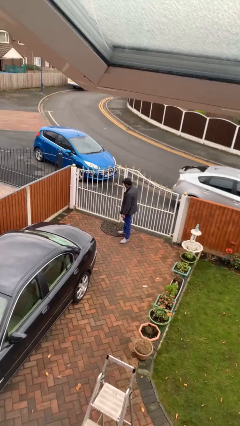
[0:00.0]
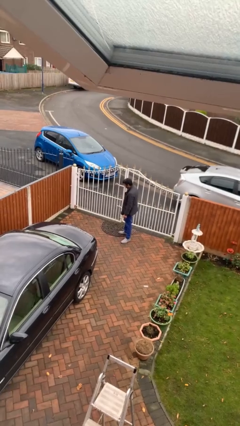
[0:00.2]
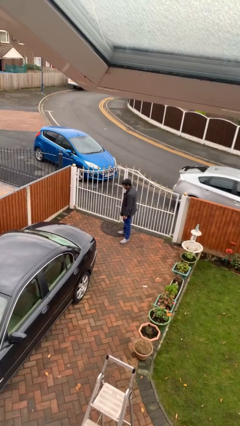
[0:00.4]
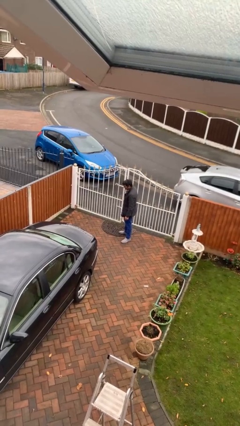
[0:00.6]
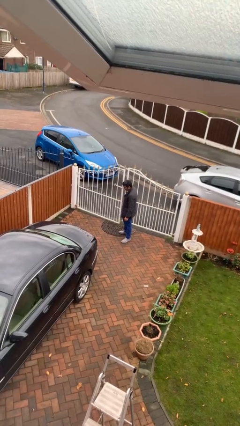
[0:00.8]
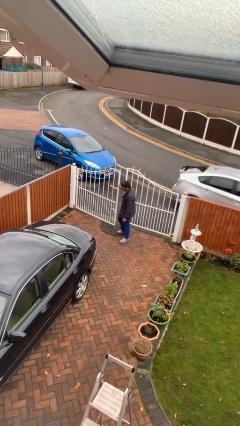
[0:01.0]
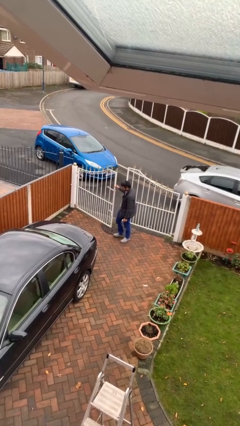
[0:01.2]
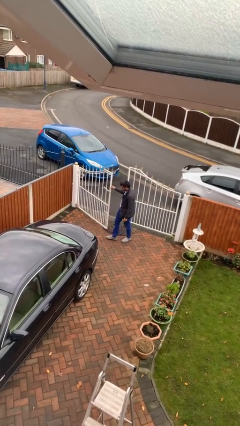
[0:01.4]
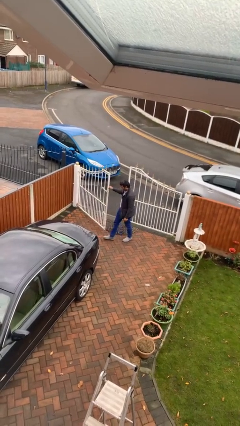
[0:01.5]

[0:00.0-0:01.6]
person opens facility door

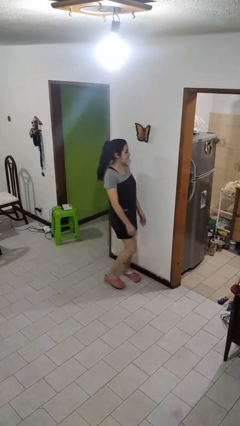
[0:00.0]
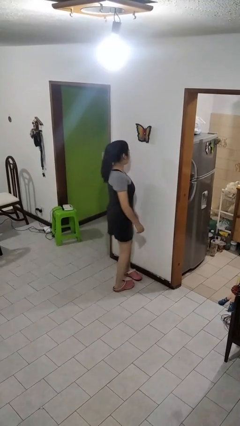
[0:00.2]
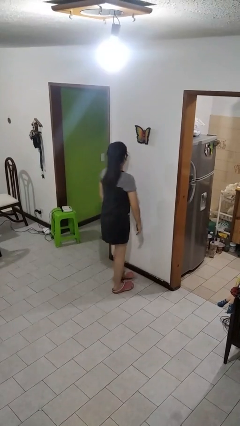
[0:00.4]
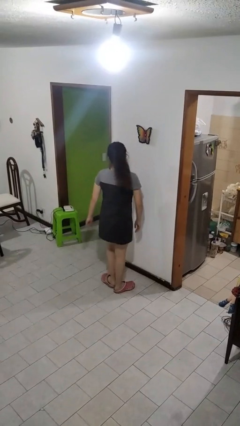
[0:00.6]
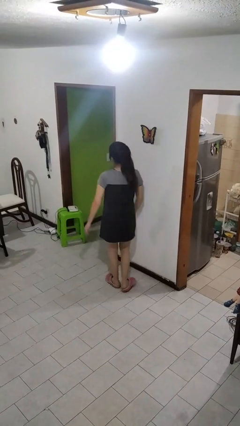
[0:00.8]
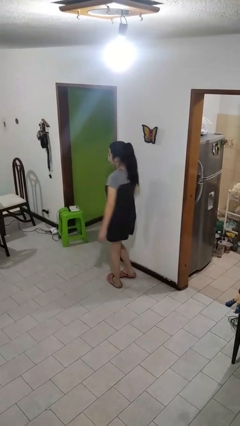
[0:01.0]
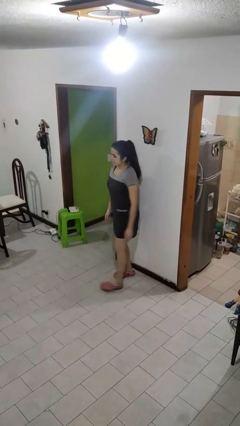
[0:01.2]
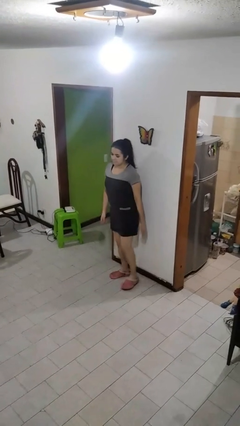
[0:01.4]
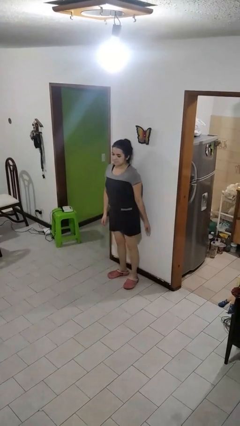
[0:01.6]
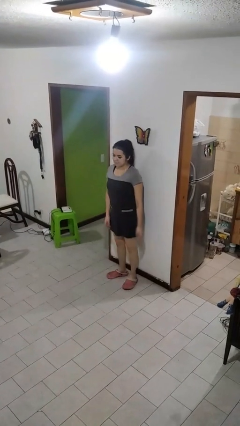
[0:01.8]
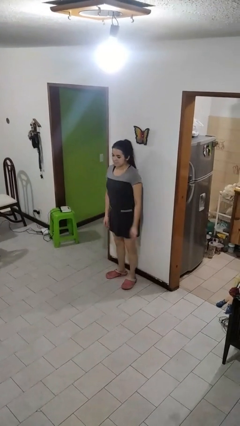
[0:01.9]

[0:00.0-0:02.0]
person twirls

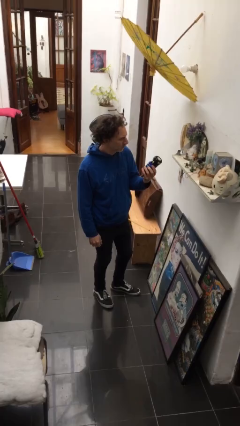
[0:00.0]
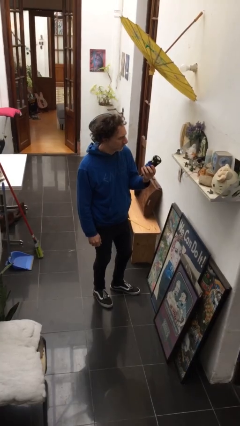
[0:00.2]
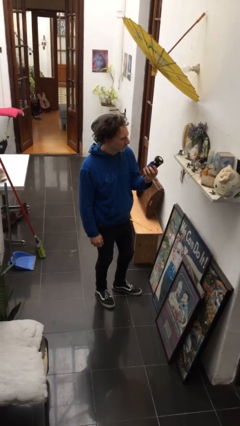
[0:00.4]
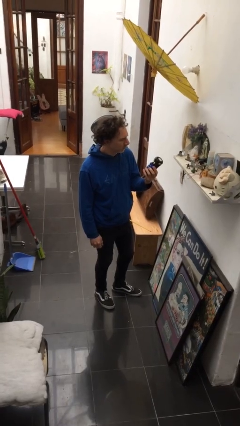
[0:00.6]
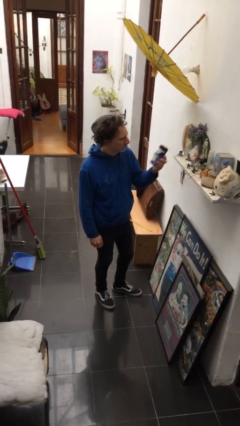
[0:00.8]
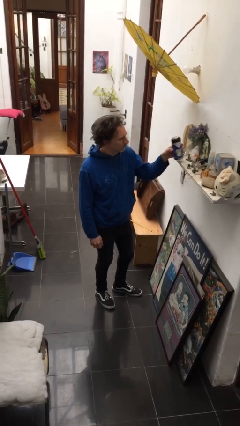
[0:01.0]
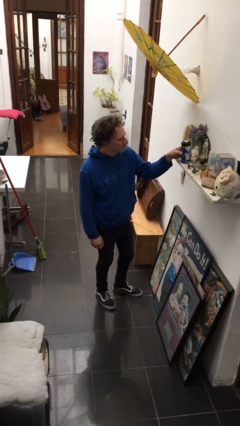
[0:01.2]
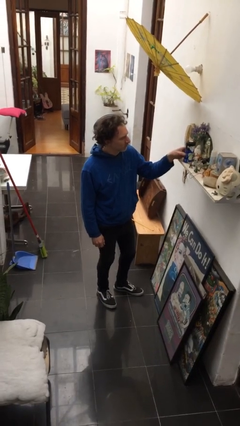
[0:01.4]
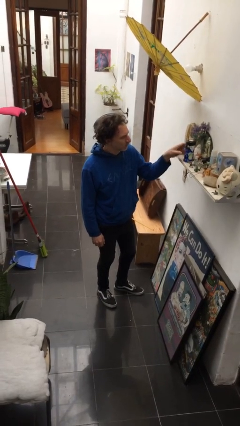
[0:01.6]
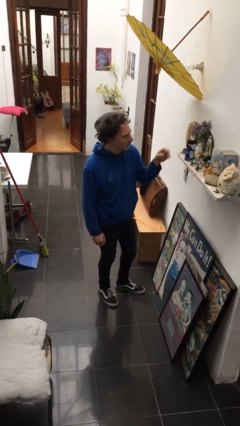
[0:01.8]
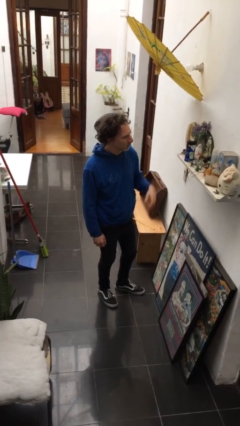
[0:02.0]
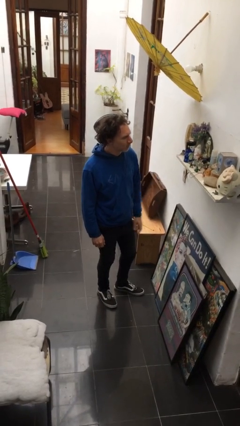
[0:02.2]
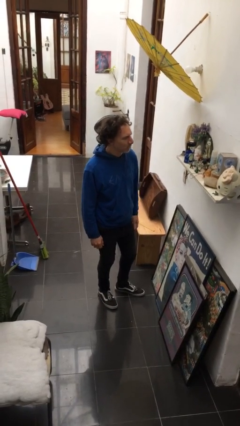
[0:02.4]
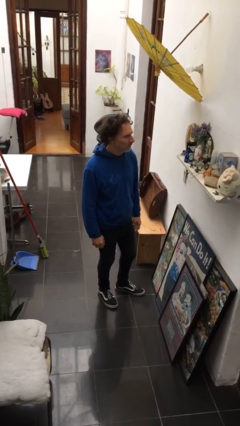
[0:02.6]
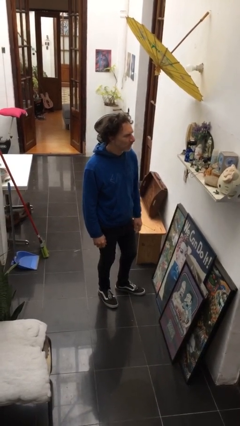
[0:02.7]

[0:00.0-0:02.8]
person puts down object on shelf

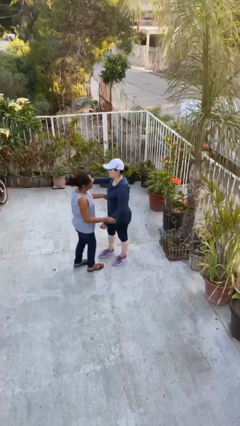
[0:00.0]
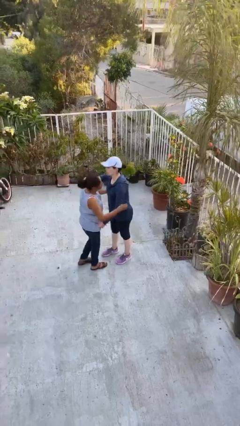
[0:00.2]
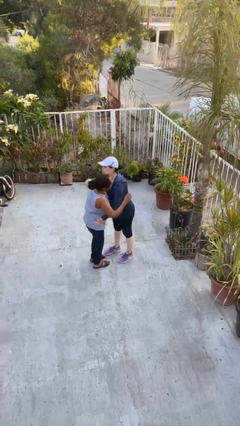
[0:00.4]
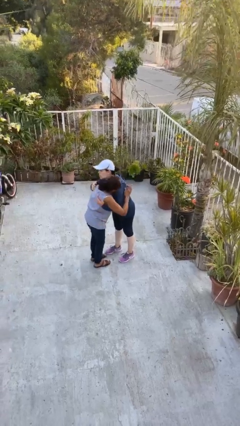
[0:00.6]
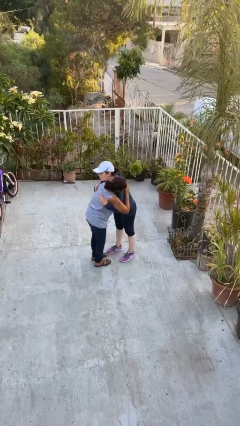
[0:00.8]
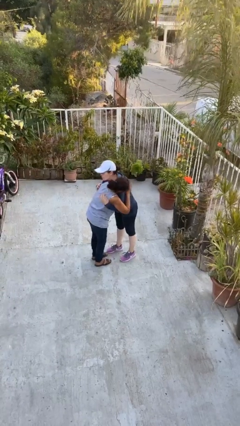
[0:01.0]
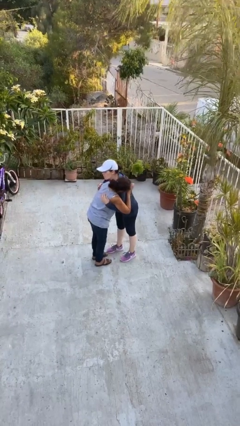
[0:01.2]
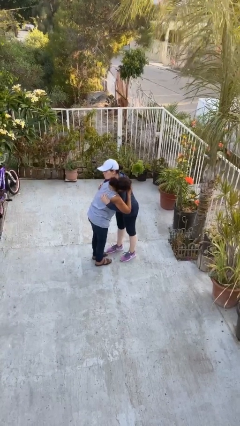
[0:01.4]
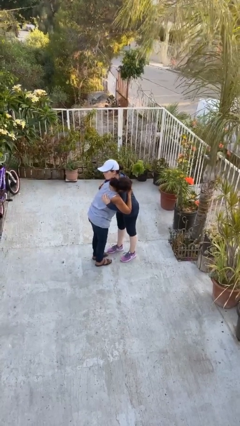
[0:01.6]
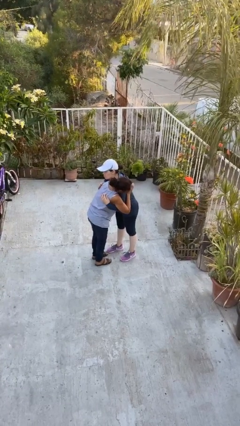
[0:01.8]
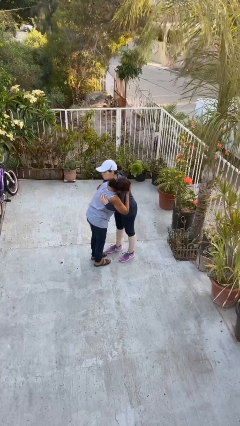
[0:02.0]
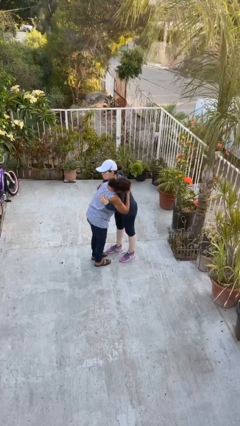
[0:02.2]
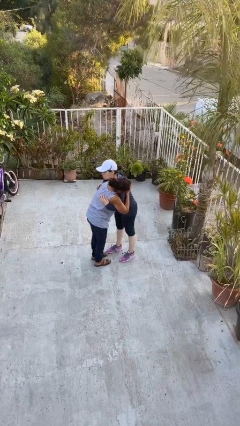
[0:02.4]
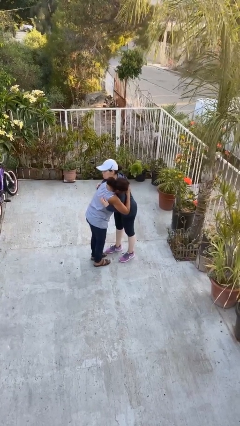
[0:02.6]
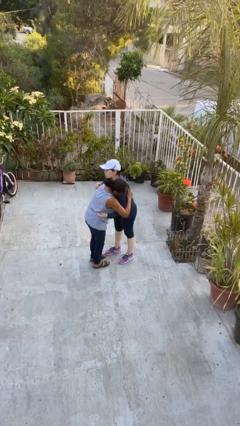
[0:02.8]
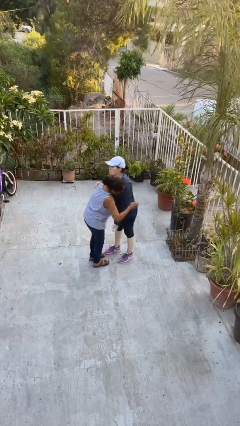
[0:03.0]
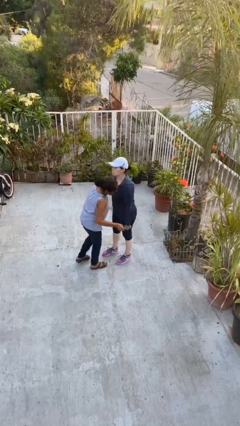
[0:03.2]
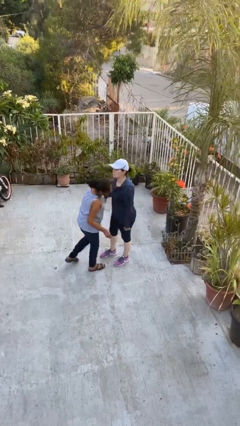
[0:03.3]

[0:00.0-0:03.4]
person embraces person

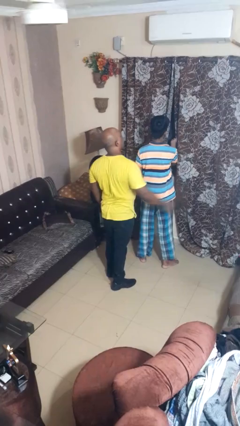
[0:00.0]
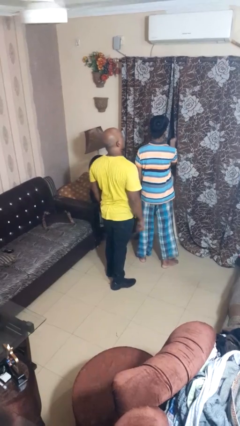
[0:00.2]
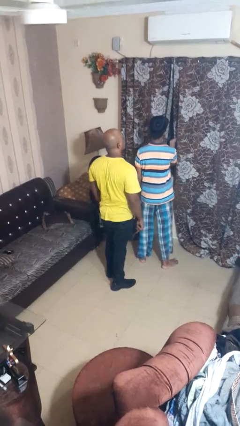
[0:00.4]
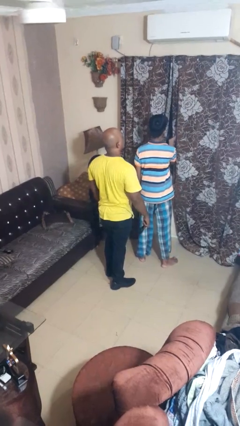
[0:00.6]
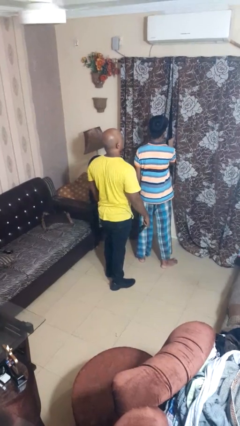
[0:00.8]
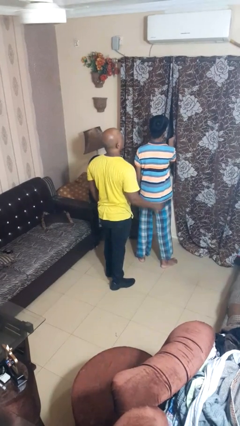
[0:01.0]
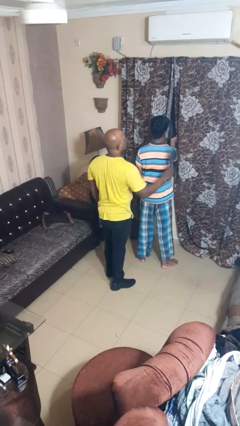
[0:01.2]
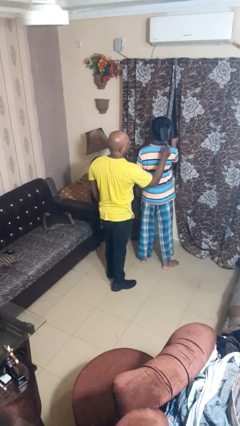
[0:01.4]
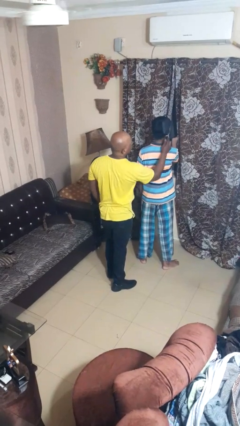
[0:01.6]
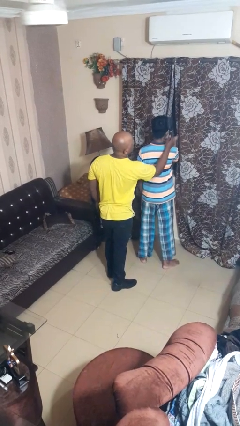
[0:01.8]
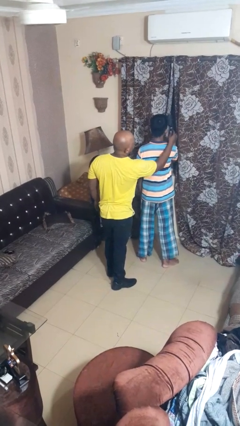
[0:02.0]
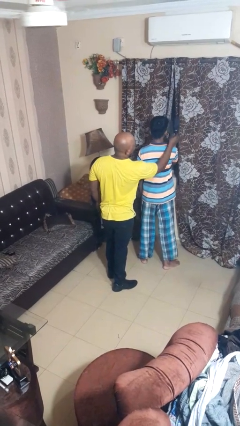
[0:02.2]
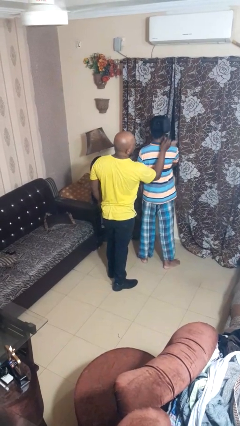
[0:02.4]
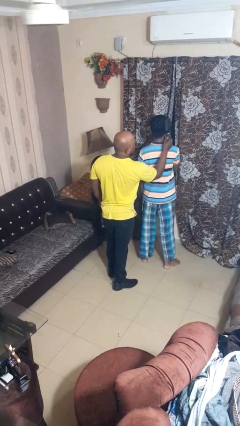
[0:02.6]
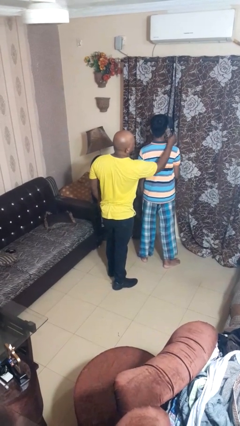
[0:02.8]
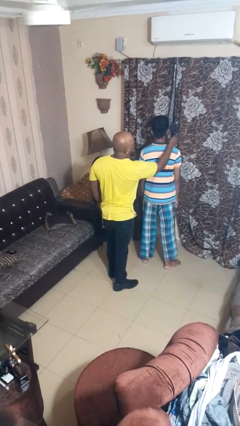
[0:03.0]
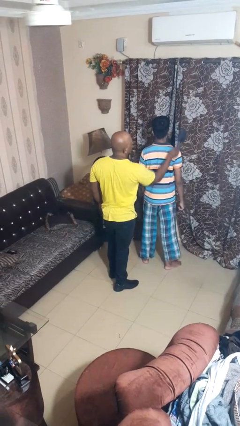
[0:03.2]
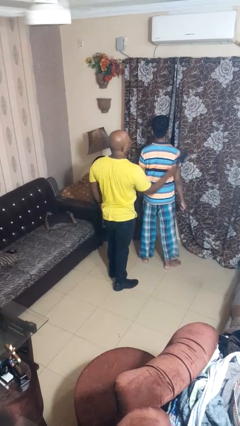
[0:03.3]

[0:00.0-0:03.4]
person brushes hair of person

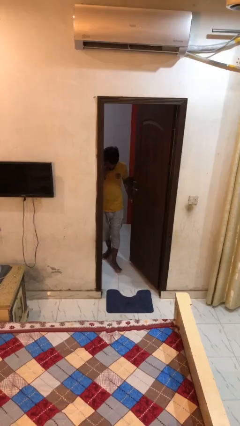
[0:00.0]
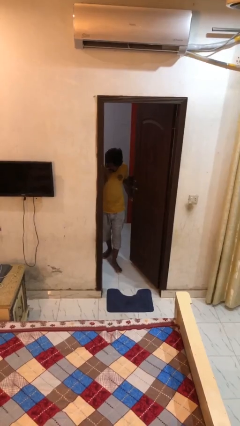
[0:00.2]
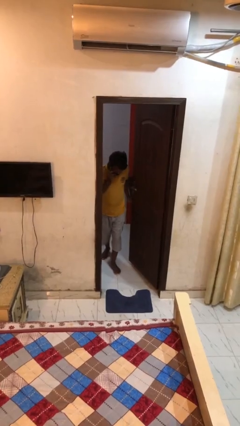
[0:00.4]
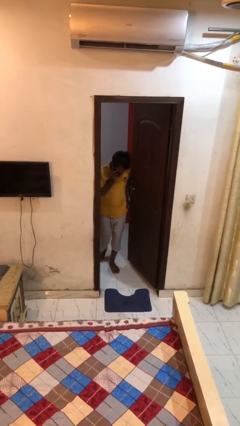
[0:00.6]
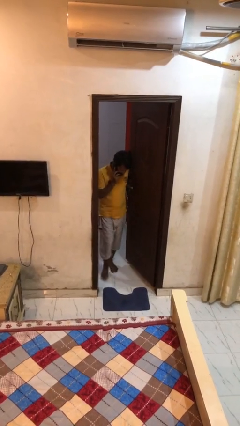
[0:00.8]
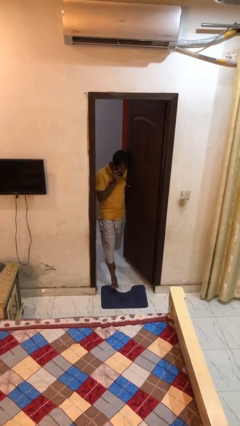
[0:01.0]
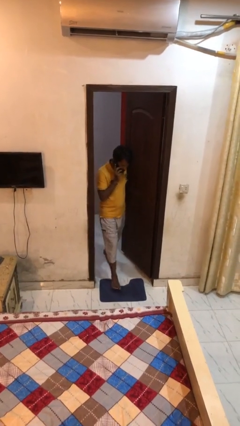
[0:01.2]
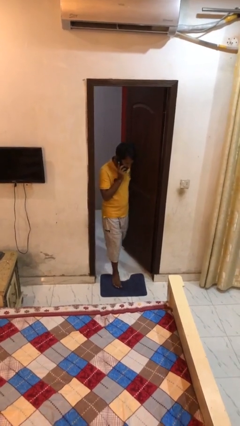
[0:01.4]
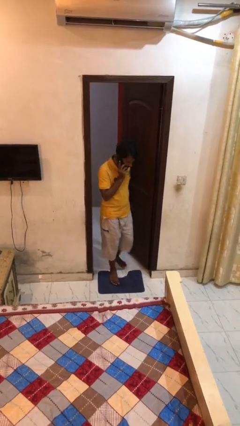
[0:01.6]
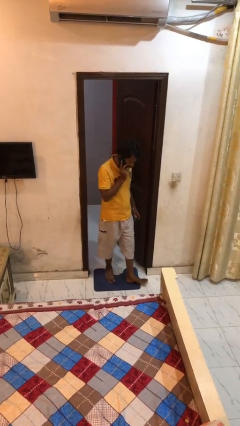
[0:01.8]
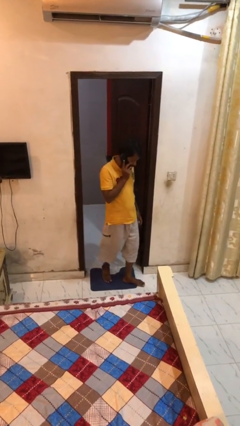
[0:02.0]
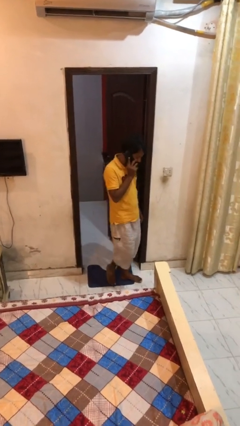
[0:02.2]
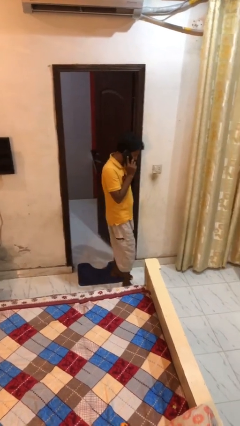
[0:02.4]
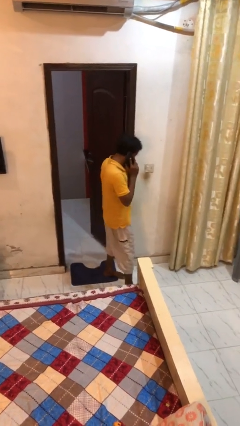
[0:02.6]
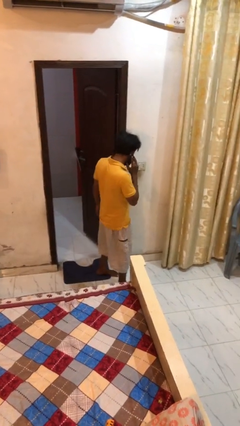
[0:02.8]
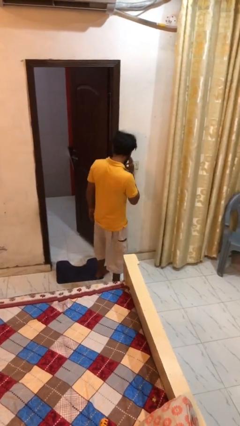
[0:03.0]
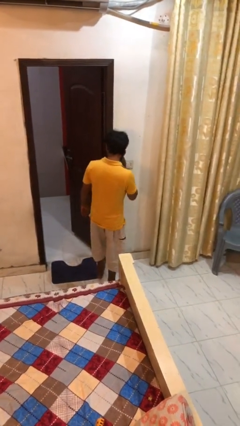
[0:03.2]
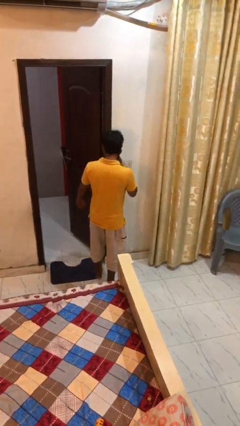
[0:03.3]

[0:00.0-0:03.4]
person enters scene through structure

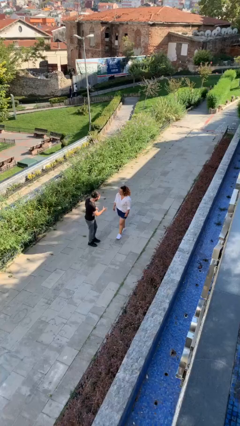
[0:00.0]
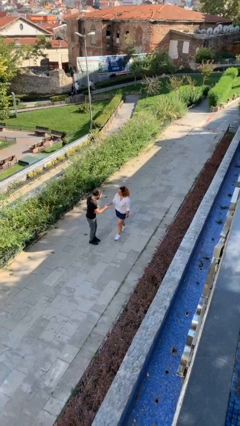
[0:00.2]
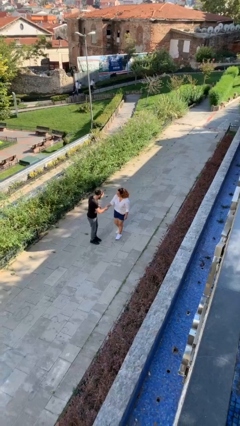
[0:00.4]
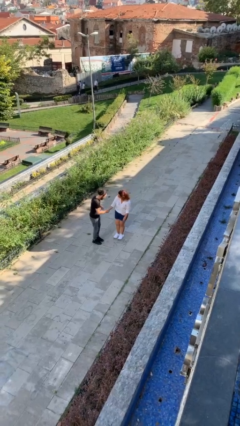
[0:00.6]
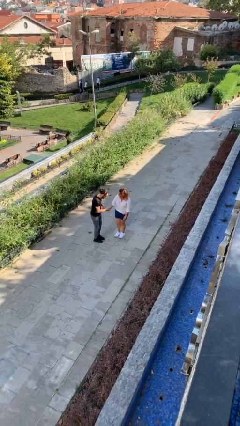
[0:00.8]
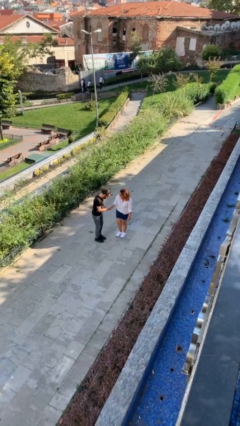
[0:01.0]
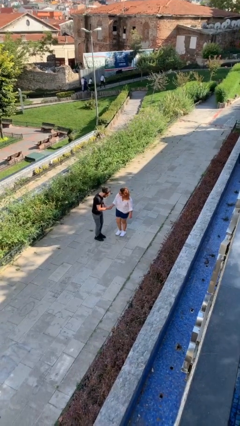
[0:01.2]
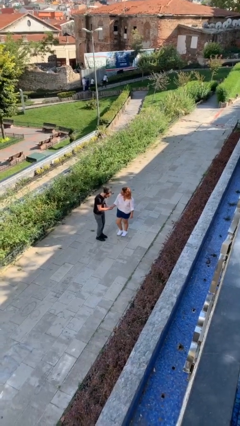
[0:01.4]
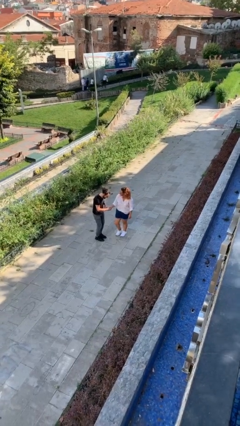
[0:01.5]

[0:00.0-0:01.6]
person shakes hand
